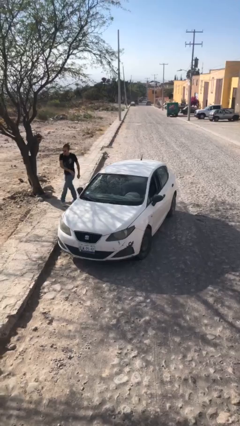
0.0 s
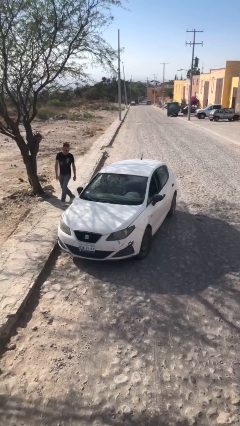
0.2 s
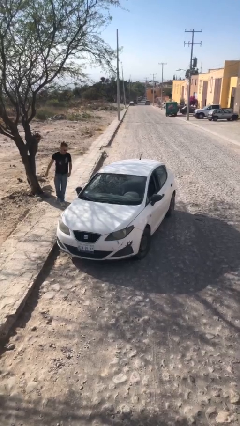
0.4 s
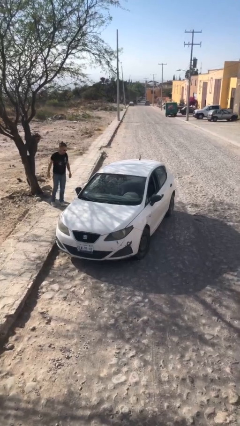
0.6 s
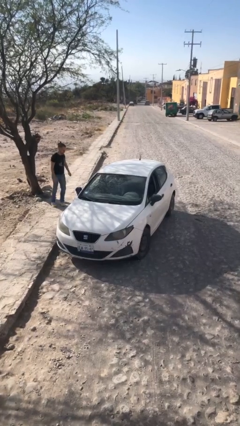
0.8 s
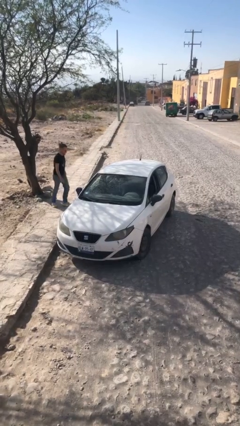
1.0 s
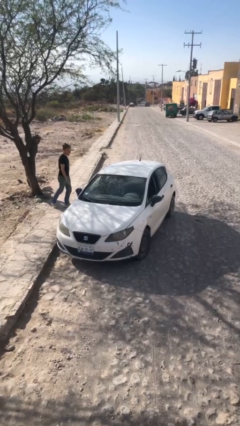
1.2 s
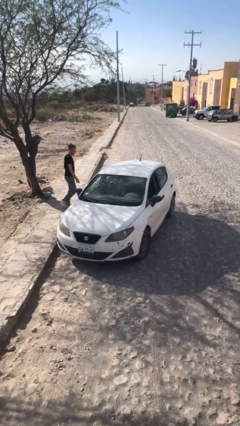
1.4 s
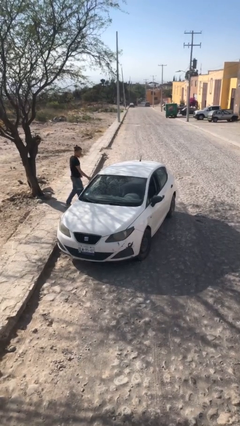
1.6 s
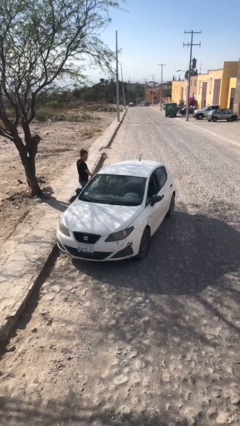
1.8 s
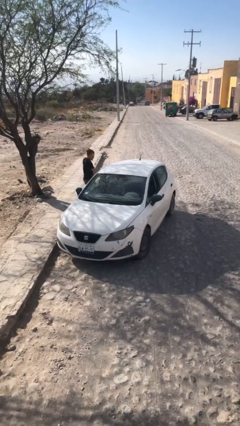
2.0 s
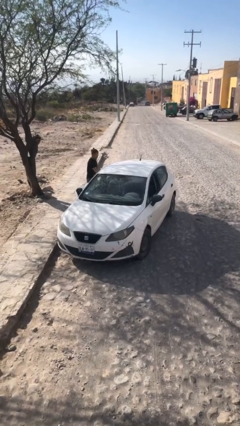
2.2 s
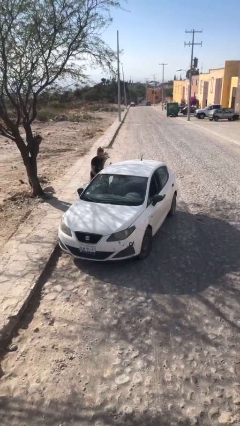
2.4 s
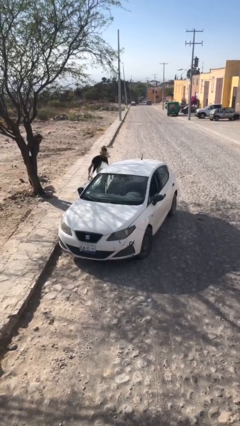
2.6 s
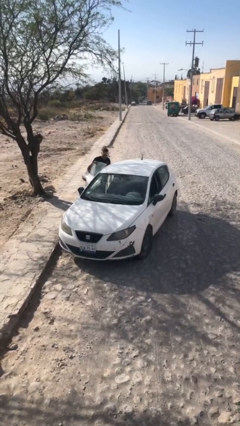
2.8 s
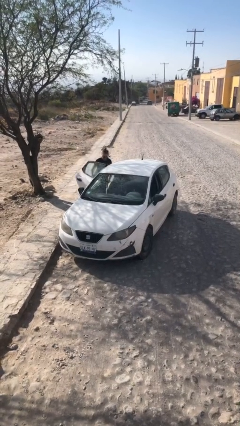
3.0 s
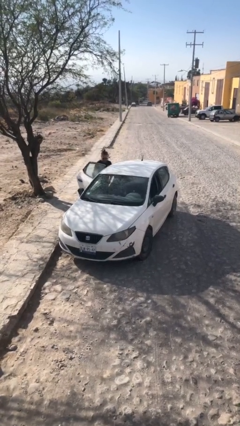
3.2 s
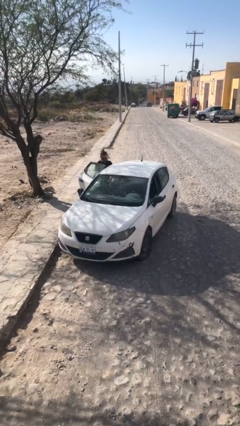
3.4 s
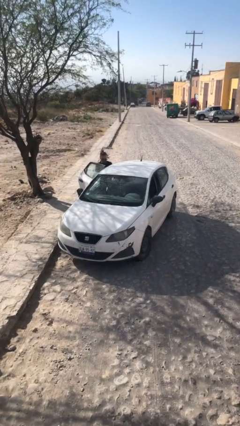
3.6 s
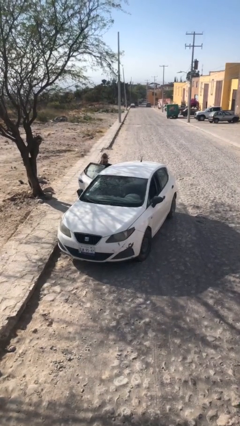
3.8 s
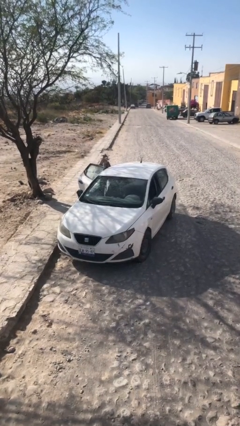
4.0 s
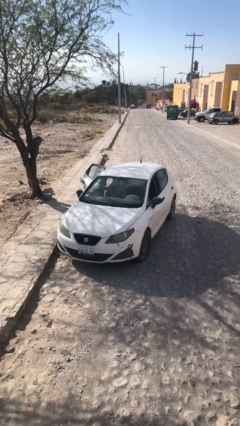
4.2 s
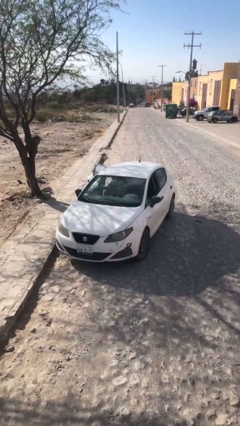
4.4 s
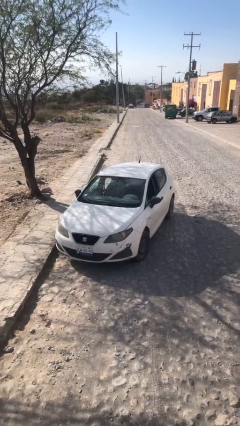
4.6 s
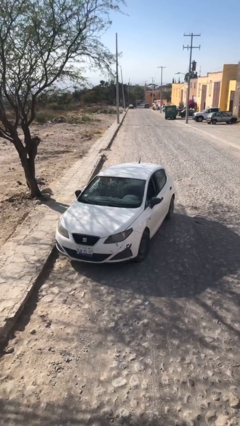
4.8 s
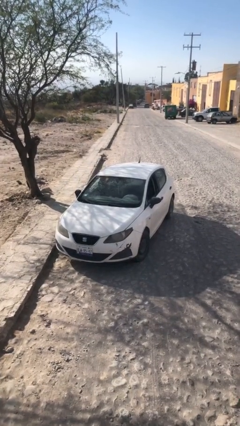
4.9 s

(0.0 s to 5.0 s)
car picks up person

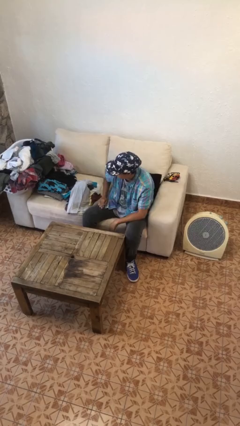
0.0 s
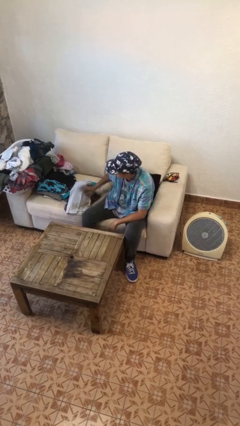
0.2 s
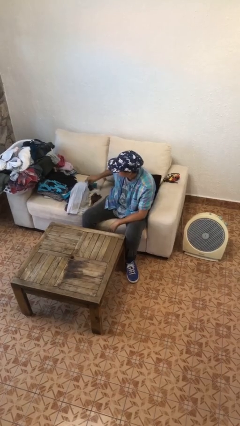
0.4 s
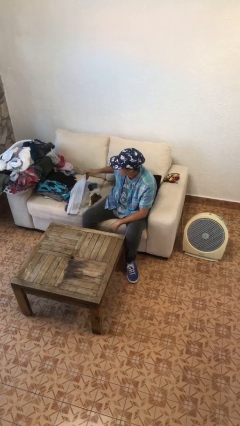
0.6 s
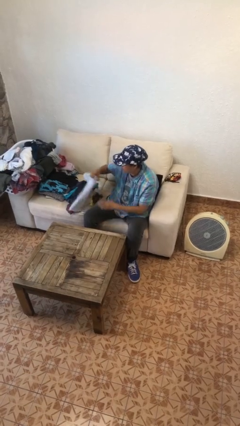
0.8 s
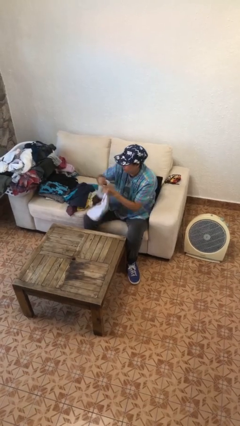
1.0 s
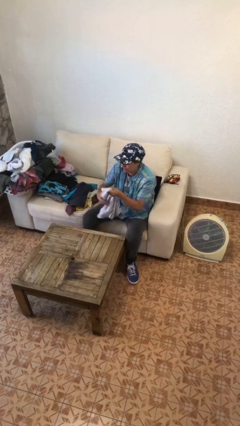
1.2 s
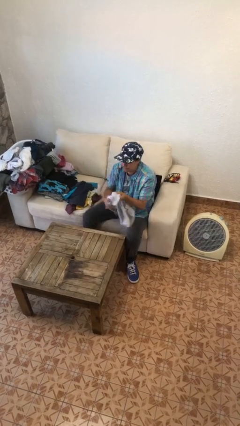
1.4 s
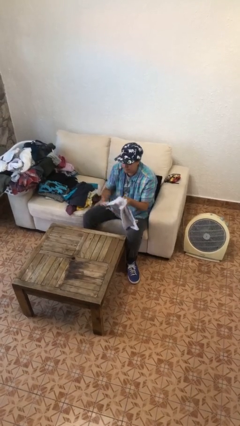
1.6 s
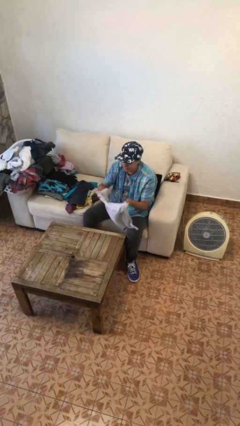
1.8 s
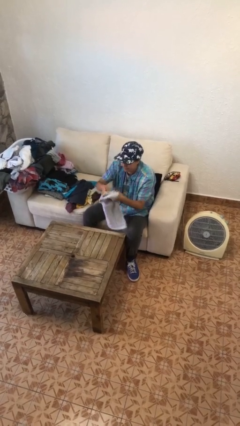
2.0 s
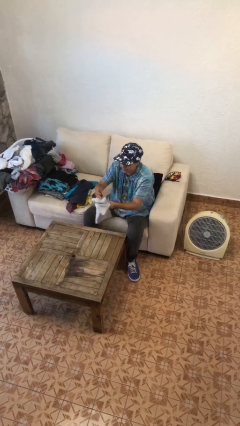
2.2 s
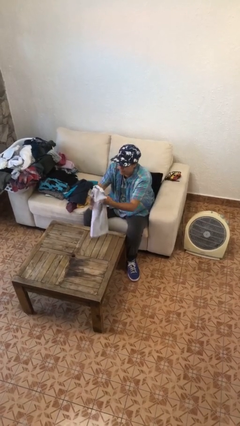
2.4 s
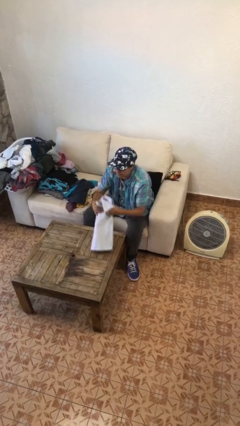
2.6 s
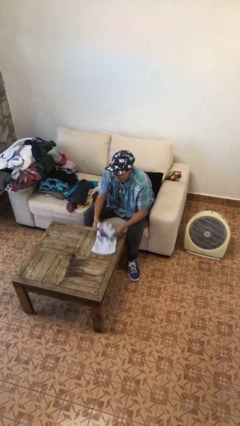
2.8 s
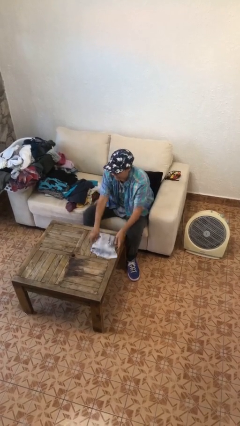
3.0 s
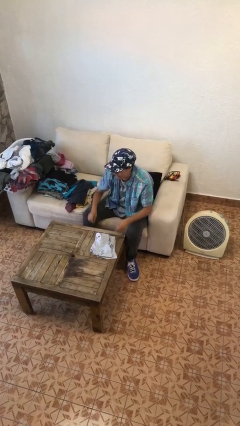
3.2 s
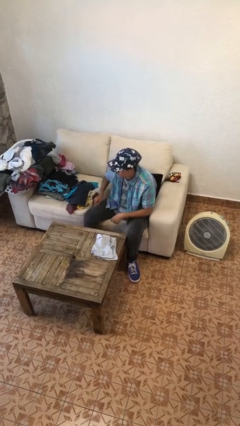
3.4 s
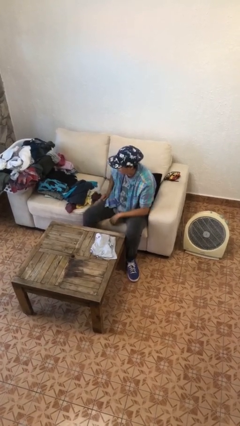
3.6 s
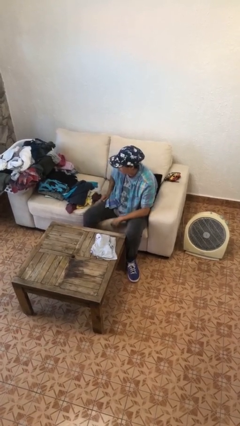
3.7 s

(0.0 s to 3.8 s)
person folds shirt

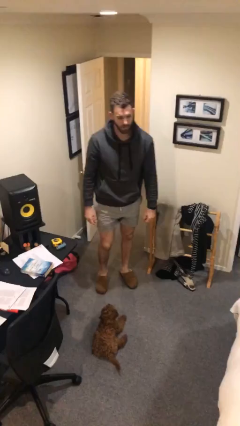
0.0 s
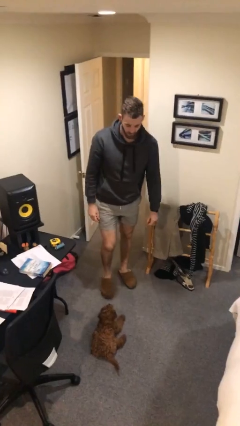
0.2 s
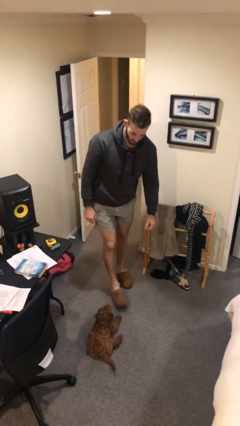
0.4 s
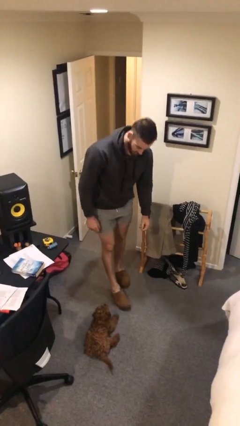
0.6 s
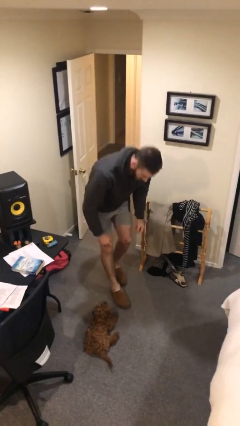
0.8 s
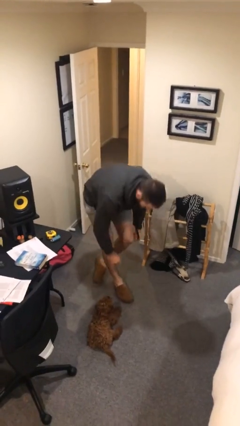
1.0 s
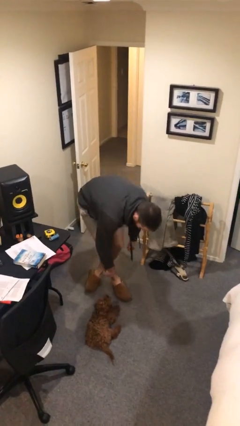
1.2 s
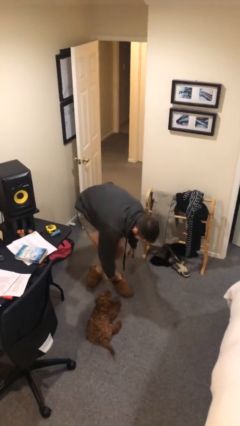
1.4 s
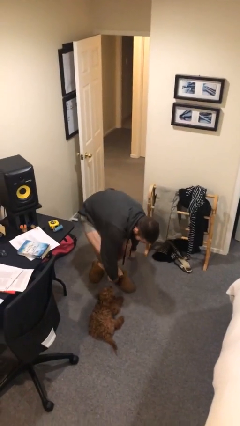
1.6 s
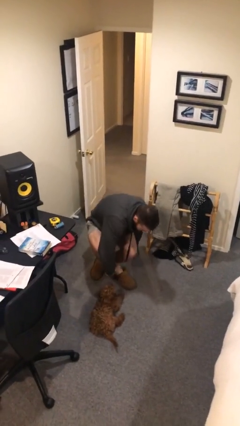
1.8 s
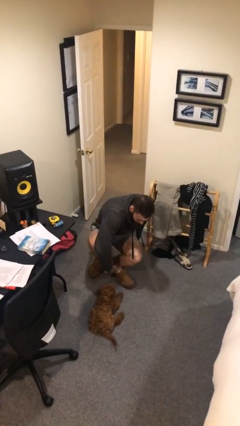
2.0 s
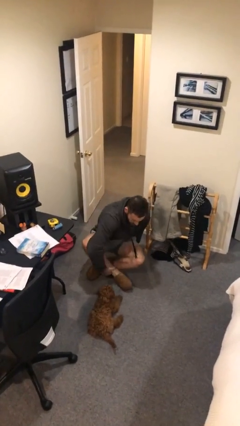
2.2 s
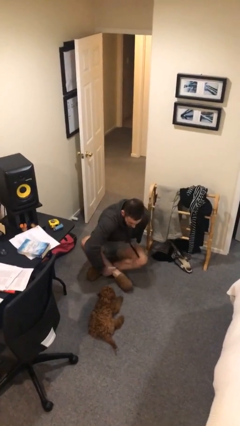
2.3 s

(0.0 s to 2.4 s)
person sits crisscross

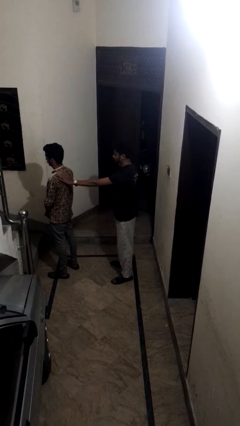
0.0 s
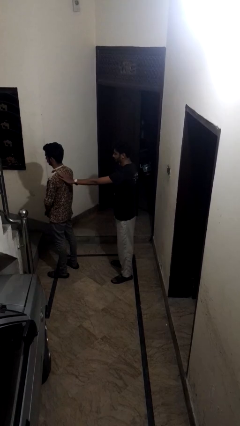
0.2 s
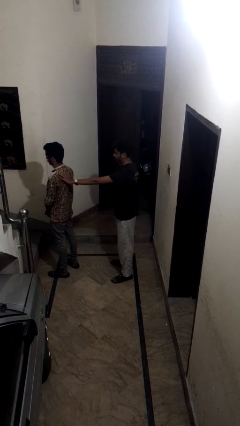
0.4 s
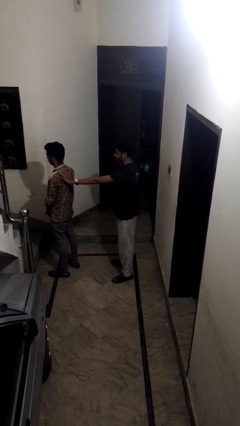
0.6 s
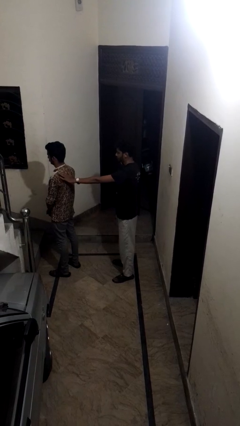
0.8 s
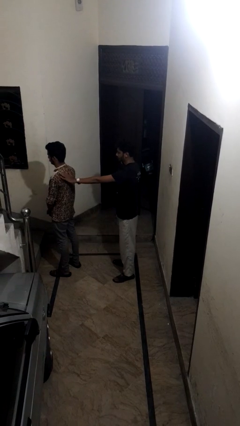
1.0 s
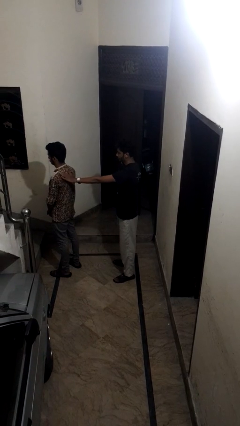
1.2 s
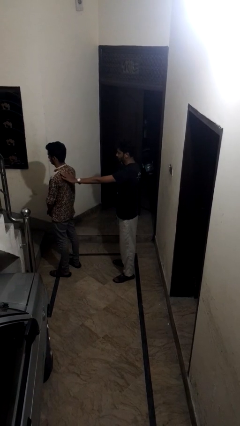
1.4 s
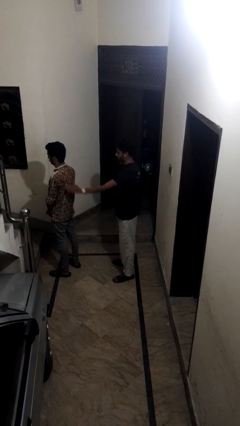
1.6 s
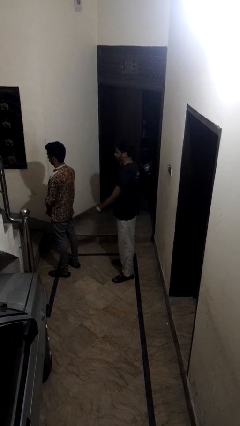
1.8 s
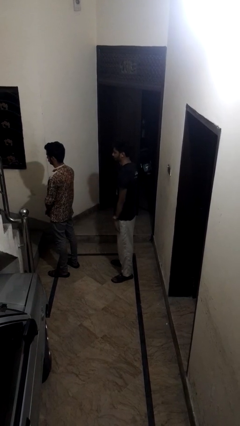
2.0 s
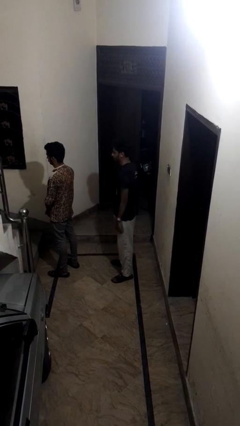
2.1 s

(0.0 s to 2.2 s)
person touches back of person

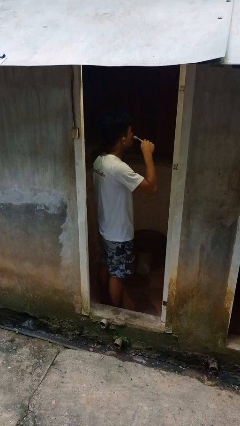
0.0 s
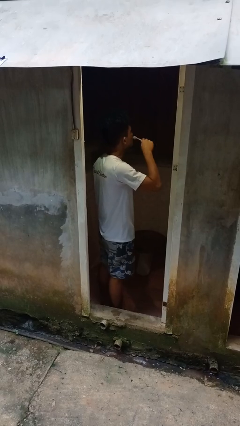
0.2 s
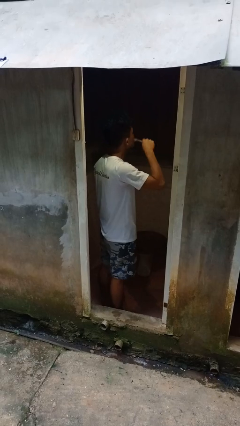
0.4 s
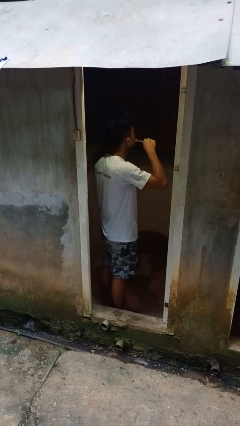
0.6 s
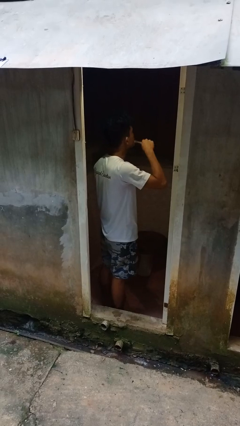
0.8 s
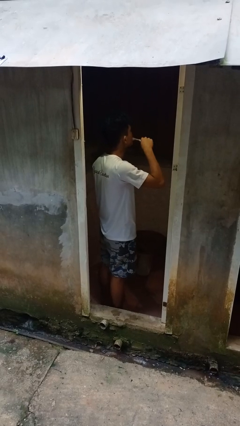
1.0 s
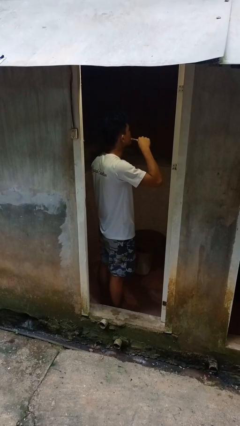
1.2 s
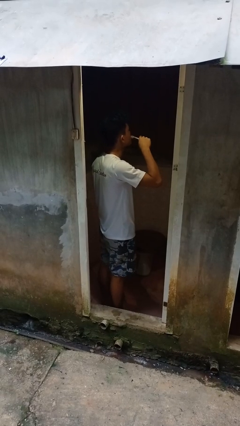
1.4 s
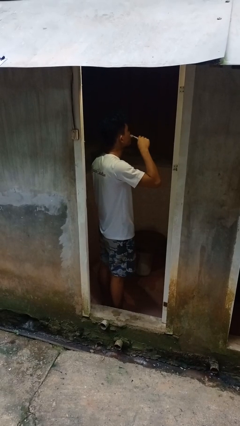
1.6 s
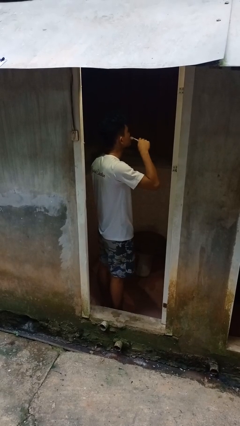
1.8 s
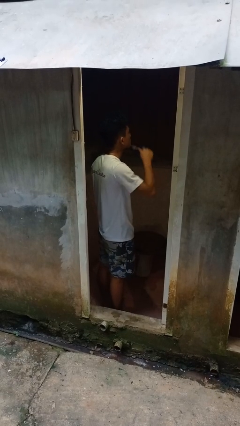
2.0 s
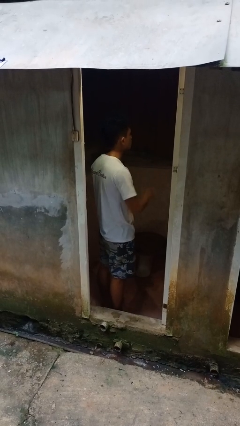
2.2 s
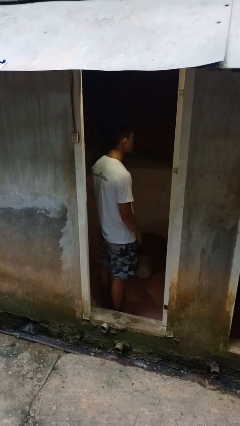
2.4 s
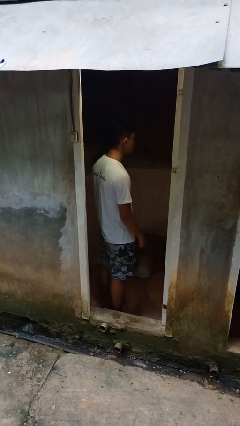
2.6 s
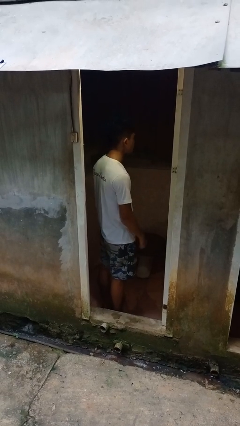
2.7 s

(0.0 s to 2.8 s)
person brushes teeth

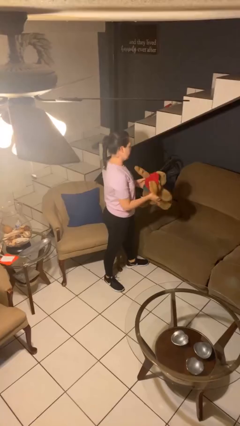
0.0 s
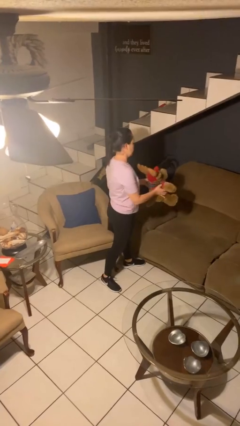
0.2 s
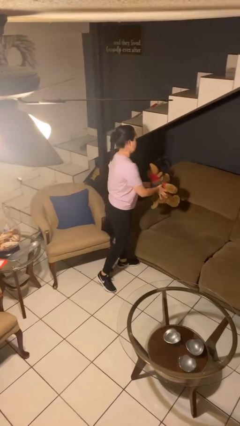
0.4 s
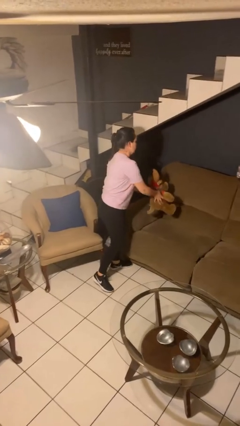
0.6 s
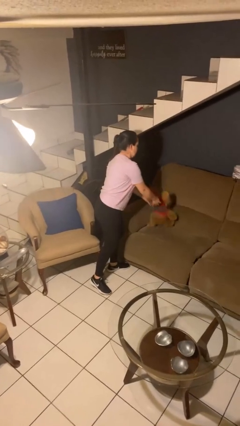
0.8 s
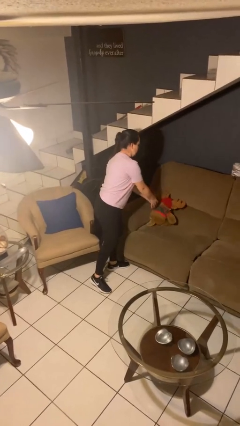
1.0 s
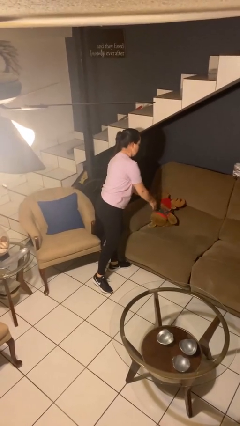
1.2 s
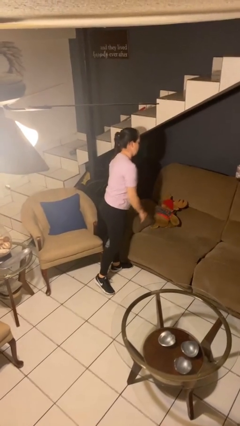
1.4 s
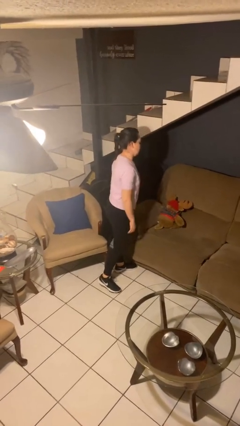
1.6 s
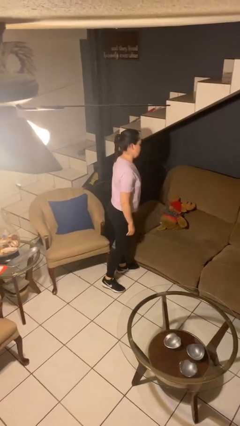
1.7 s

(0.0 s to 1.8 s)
person puts down object on couch
